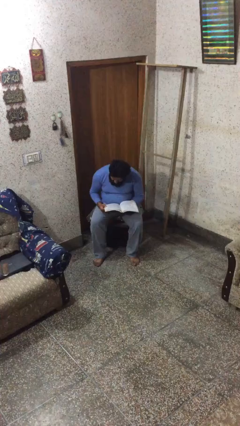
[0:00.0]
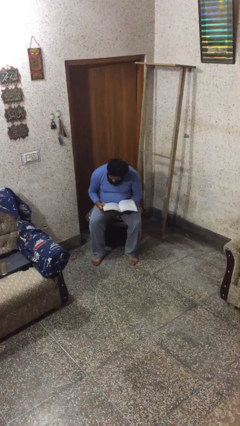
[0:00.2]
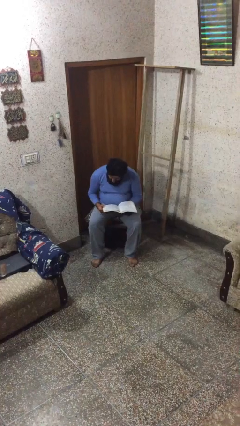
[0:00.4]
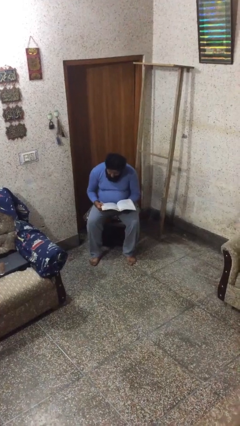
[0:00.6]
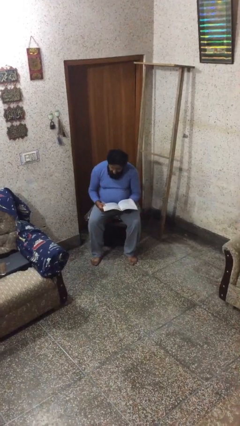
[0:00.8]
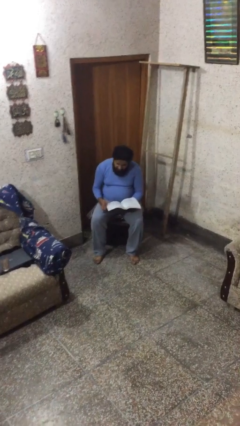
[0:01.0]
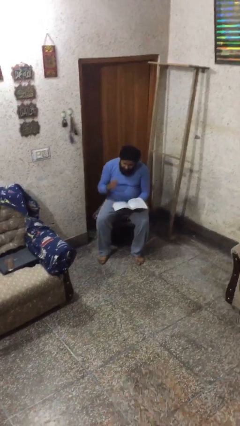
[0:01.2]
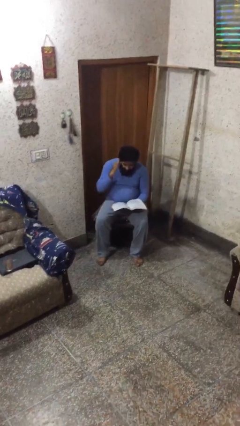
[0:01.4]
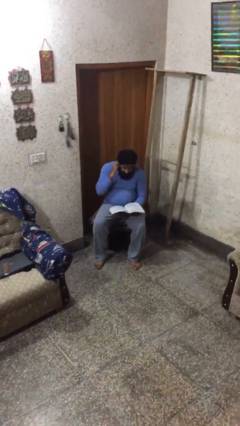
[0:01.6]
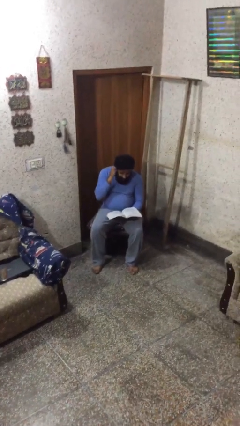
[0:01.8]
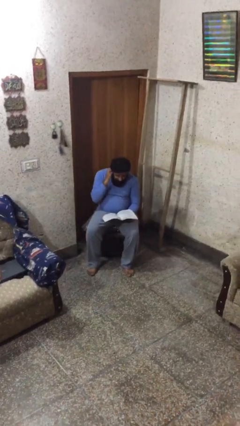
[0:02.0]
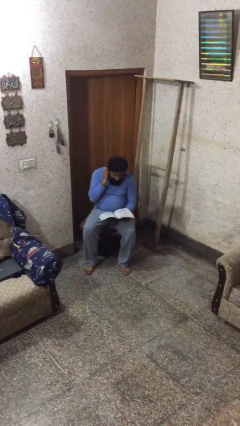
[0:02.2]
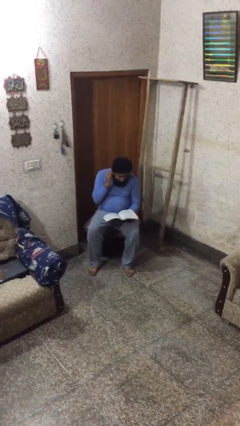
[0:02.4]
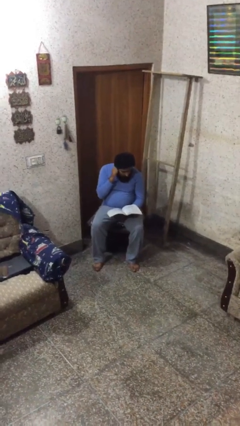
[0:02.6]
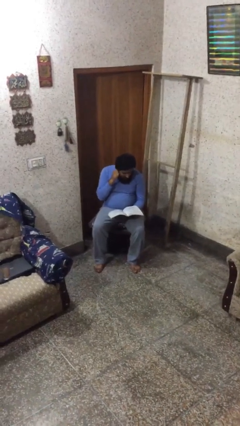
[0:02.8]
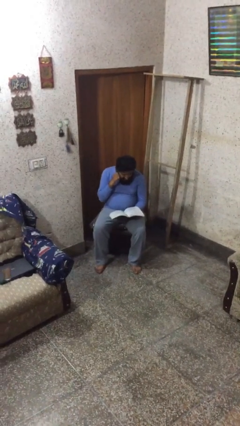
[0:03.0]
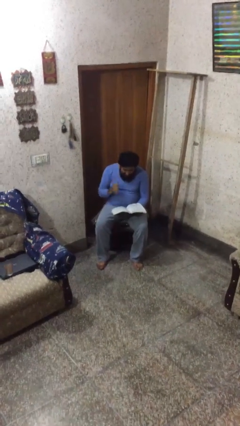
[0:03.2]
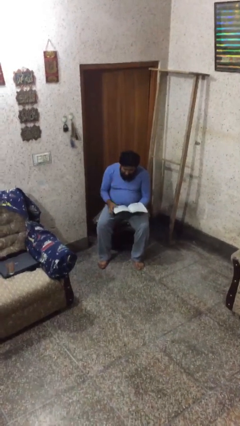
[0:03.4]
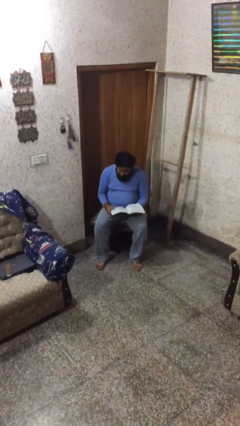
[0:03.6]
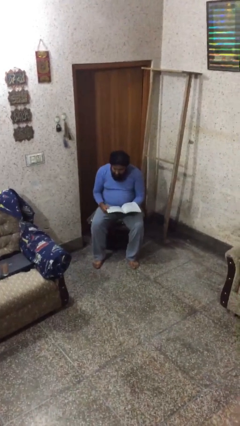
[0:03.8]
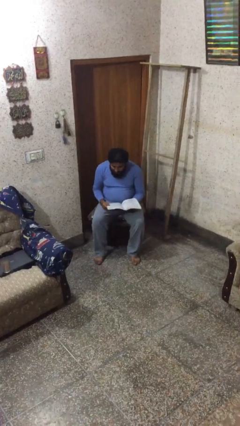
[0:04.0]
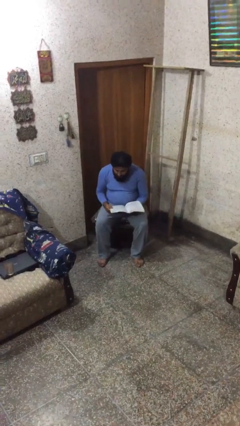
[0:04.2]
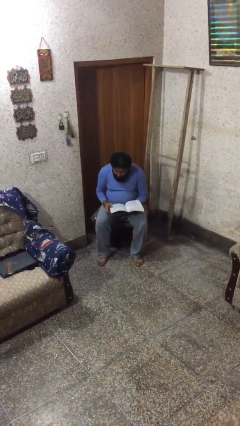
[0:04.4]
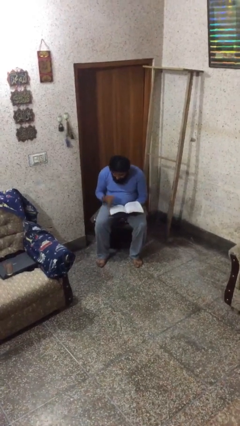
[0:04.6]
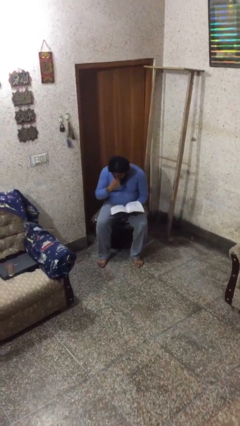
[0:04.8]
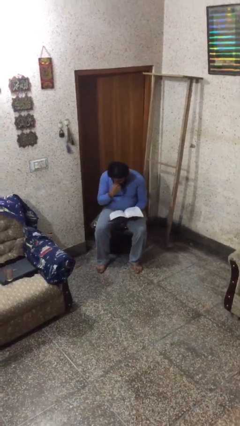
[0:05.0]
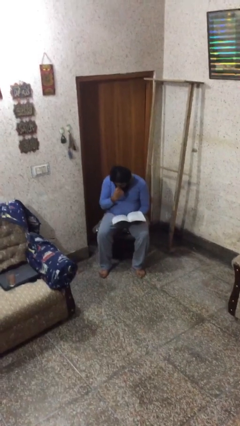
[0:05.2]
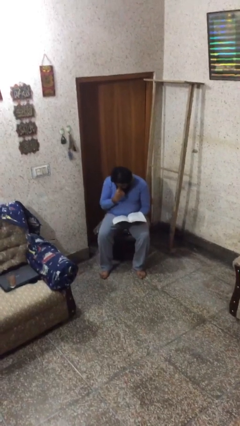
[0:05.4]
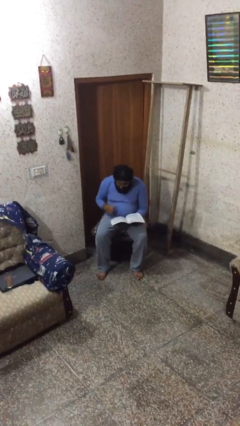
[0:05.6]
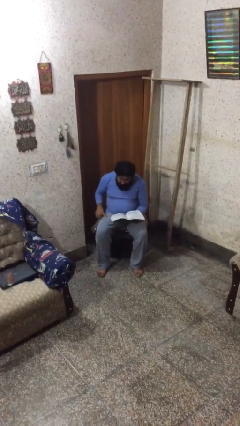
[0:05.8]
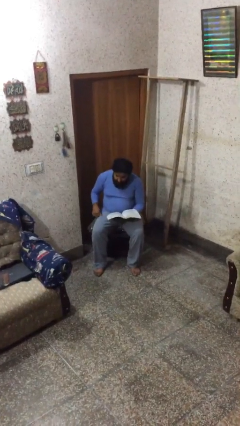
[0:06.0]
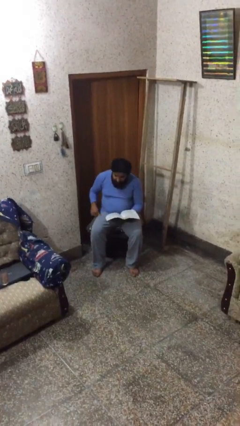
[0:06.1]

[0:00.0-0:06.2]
person reads document

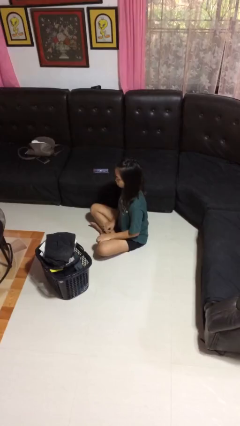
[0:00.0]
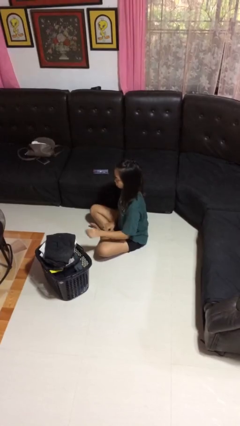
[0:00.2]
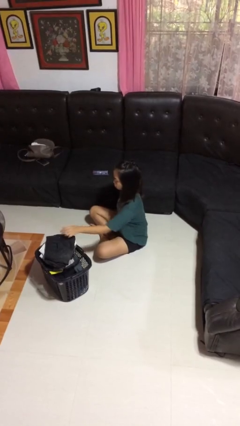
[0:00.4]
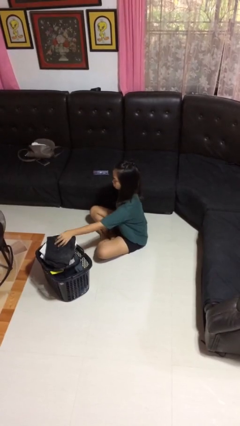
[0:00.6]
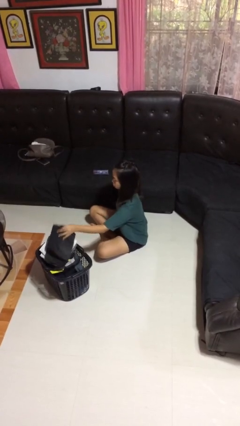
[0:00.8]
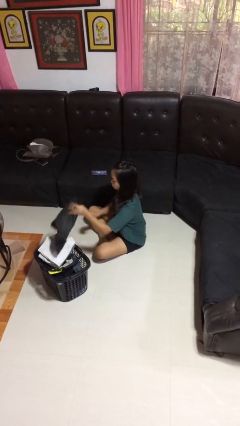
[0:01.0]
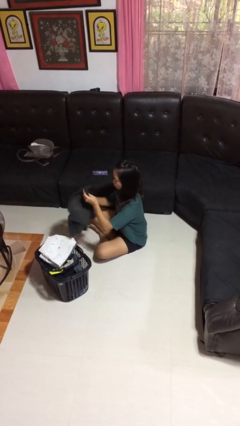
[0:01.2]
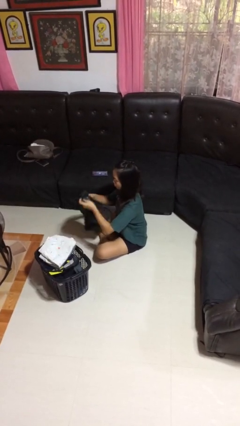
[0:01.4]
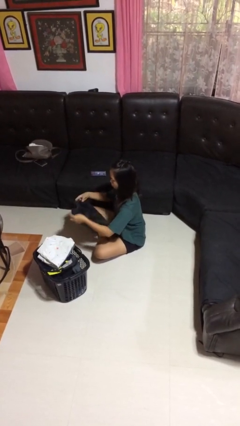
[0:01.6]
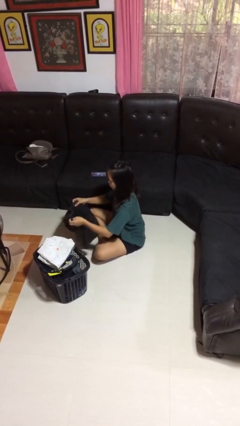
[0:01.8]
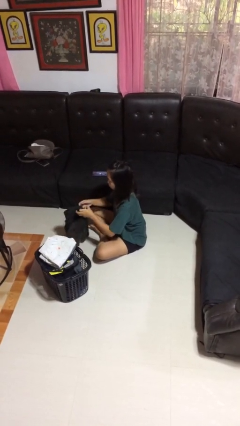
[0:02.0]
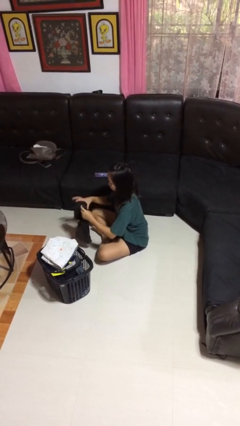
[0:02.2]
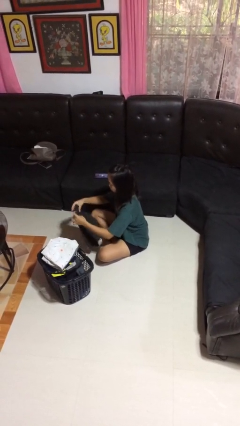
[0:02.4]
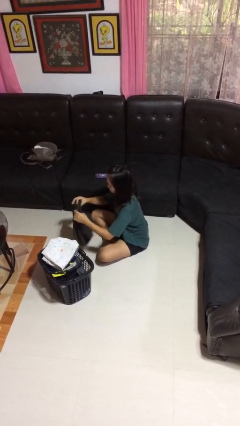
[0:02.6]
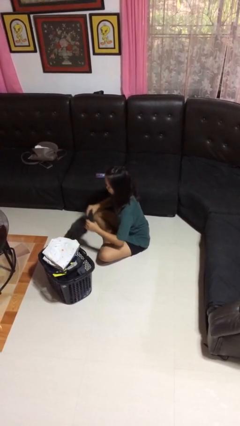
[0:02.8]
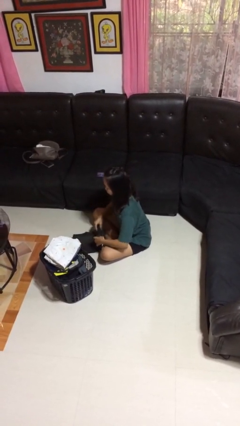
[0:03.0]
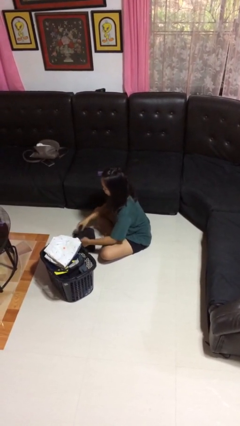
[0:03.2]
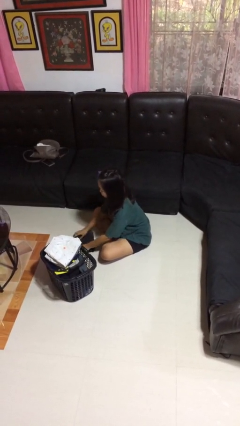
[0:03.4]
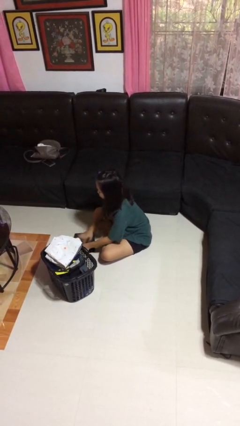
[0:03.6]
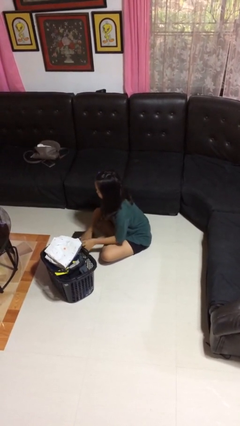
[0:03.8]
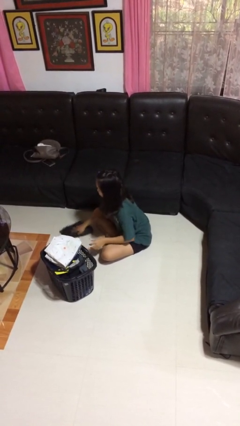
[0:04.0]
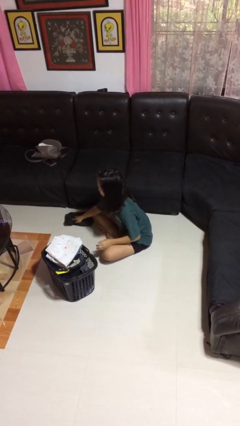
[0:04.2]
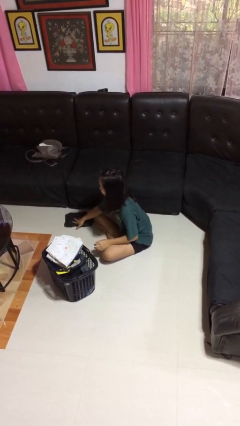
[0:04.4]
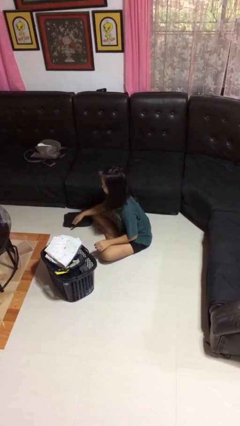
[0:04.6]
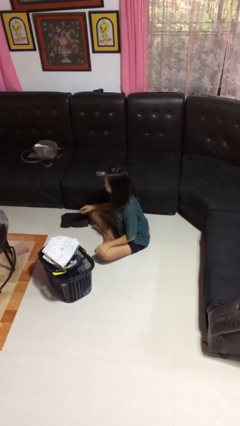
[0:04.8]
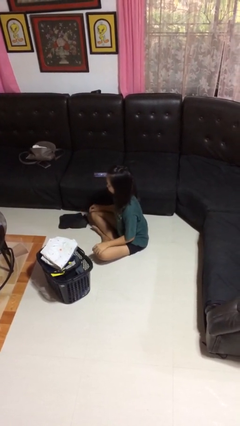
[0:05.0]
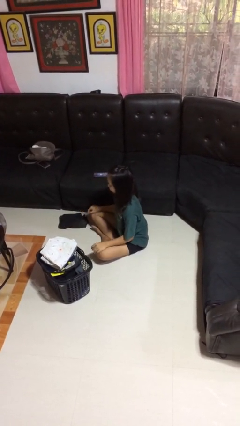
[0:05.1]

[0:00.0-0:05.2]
person folds pants

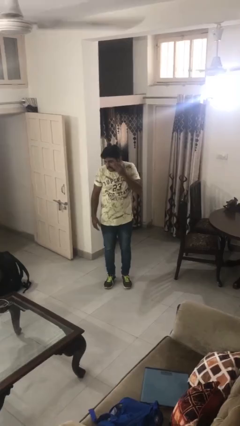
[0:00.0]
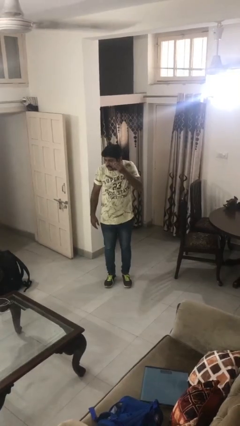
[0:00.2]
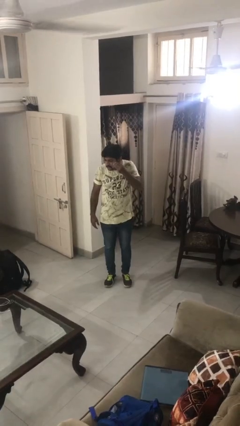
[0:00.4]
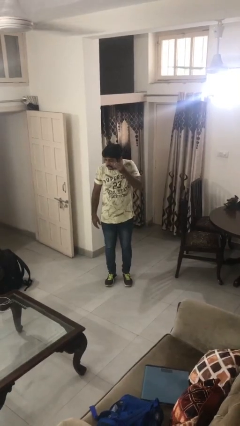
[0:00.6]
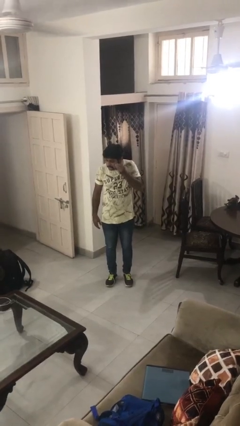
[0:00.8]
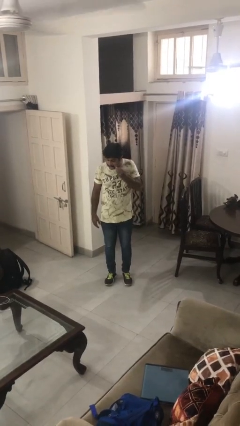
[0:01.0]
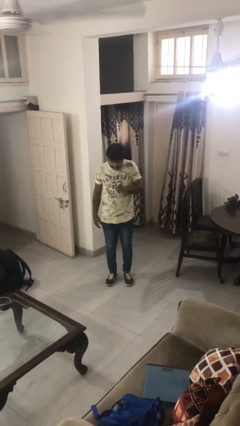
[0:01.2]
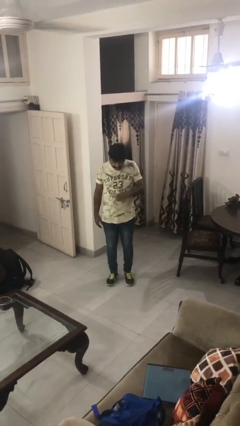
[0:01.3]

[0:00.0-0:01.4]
person swats bug

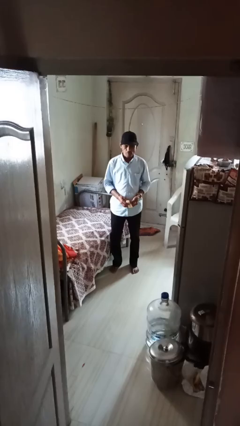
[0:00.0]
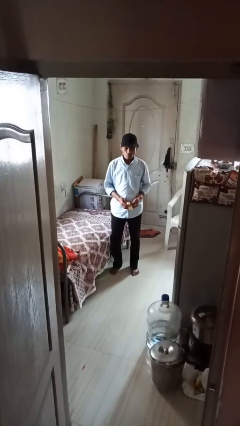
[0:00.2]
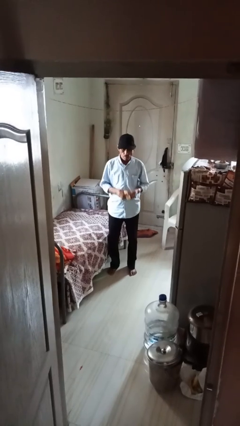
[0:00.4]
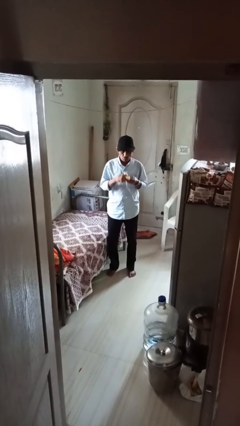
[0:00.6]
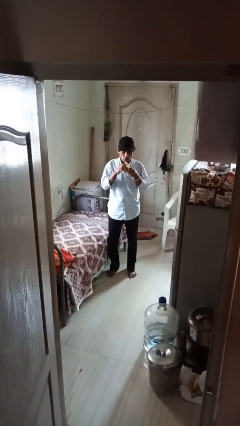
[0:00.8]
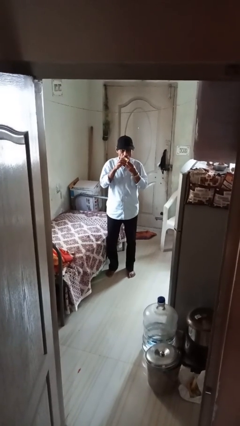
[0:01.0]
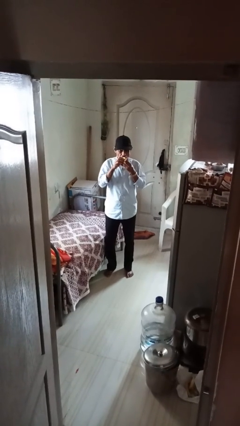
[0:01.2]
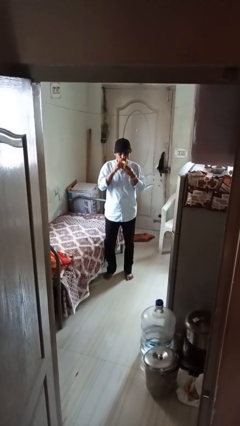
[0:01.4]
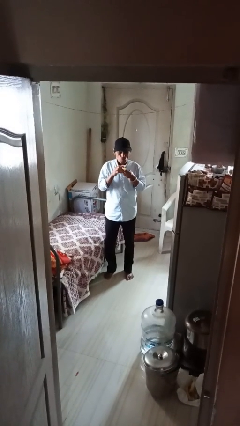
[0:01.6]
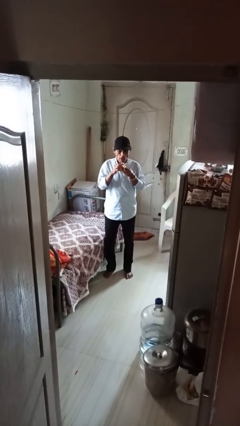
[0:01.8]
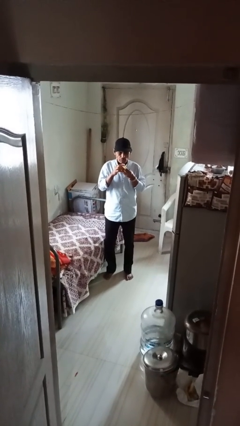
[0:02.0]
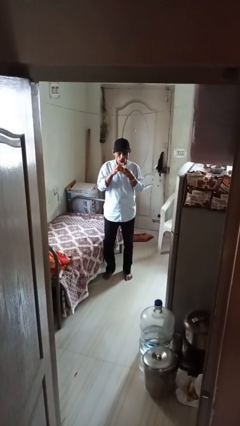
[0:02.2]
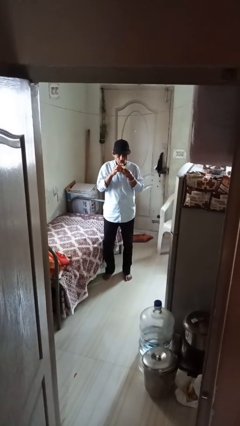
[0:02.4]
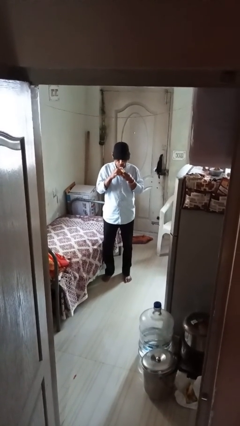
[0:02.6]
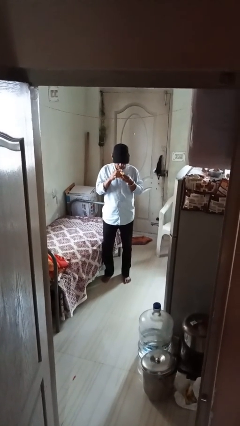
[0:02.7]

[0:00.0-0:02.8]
person eats banana

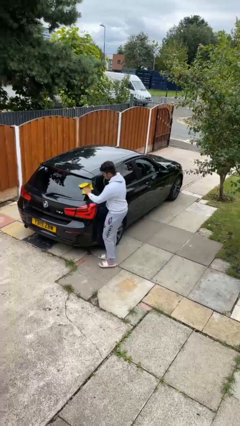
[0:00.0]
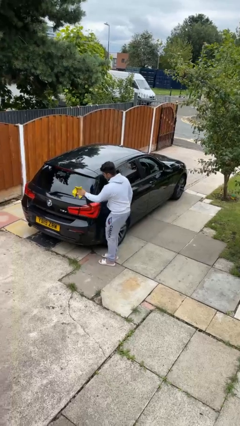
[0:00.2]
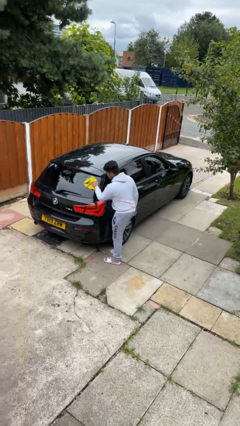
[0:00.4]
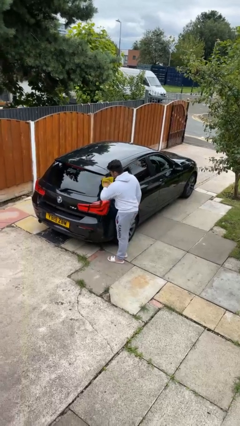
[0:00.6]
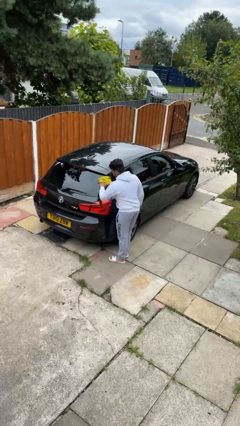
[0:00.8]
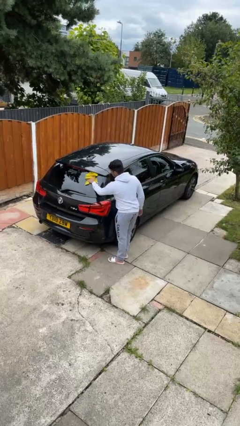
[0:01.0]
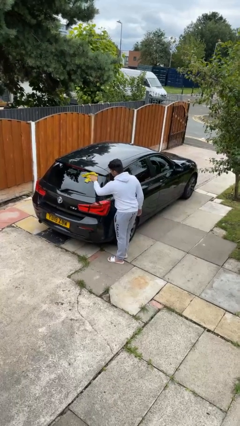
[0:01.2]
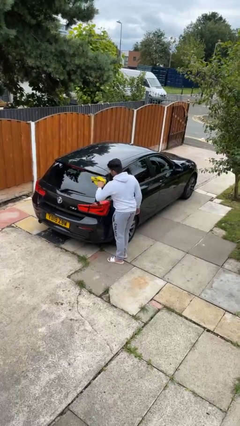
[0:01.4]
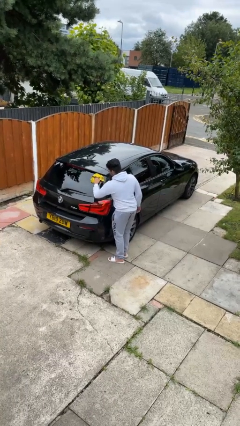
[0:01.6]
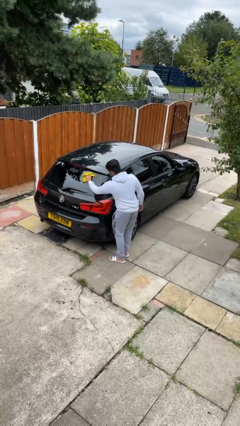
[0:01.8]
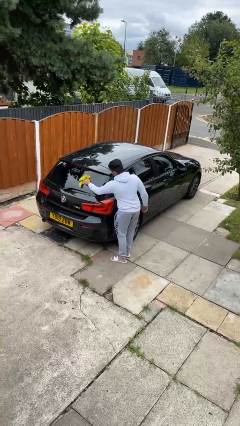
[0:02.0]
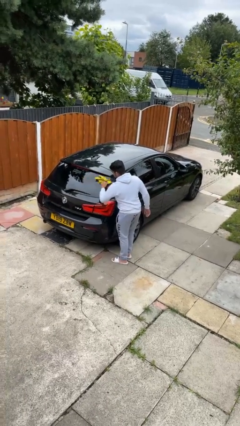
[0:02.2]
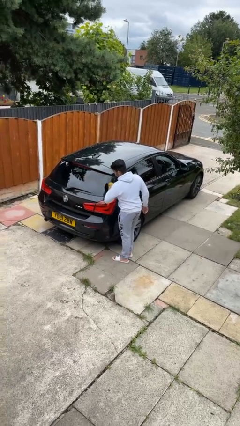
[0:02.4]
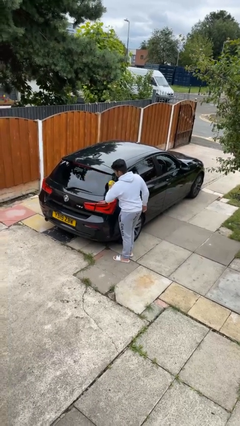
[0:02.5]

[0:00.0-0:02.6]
person polishes car with rag
